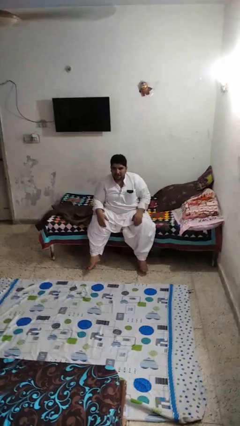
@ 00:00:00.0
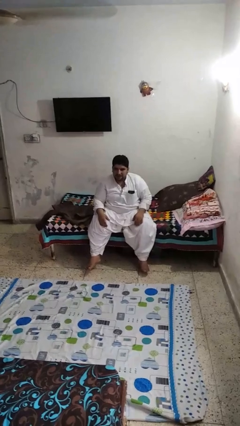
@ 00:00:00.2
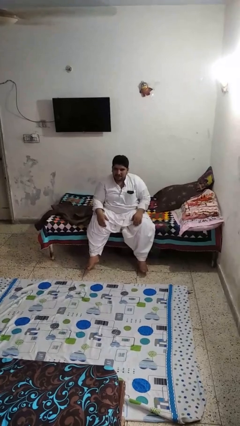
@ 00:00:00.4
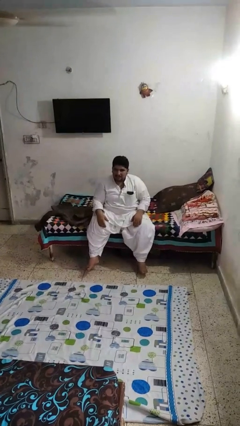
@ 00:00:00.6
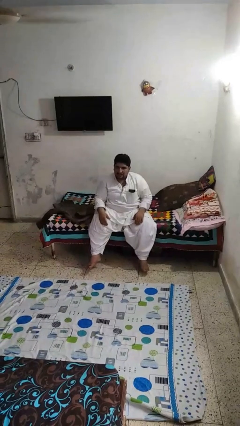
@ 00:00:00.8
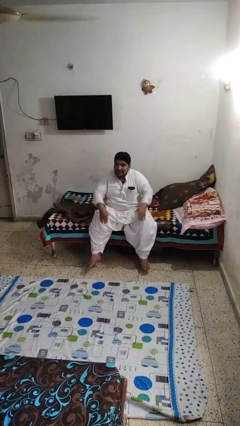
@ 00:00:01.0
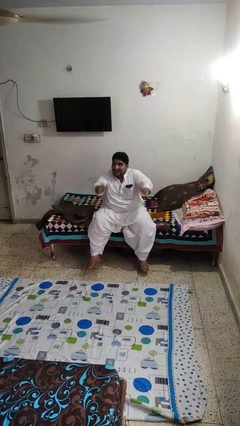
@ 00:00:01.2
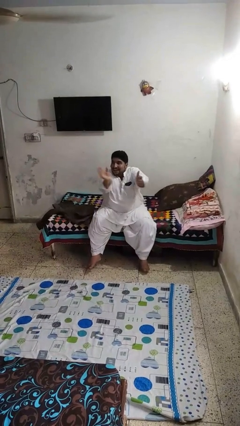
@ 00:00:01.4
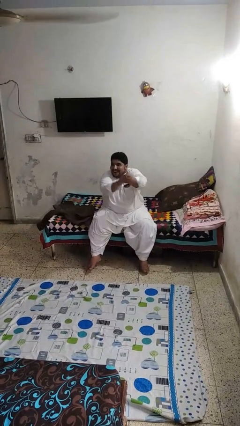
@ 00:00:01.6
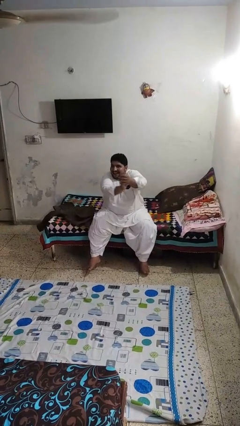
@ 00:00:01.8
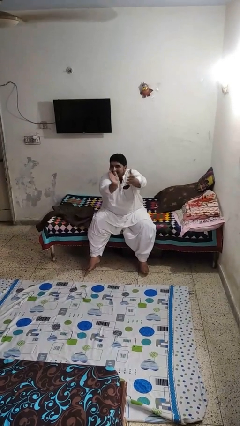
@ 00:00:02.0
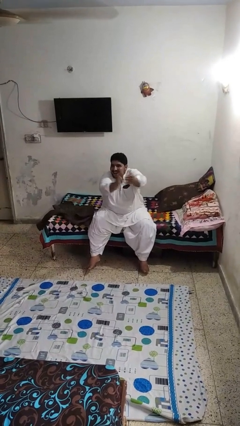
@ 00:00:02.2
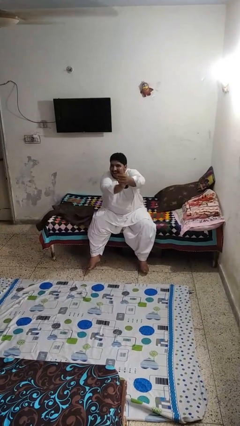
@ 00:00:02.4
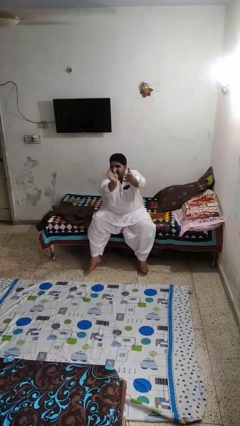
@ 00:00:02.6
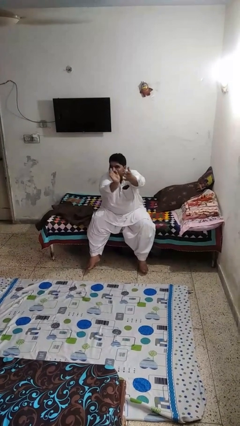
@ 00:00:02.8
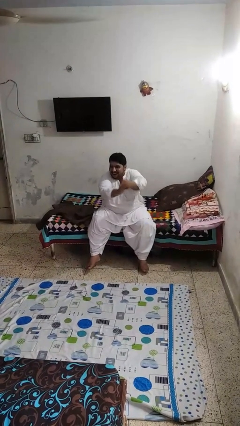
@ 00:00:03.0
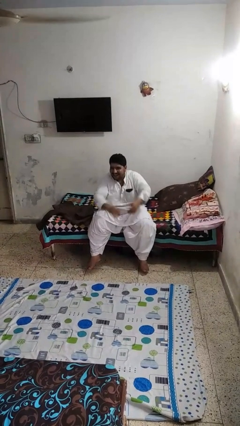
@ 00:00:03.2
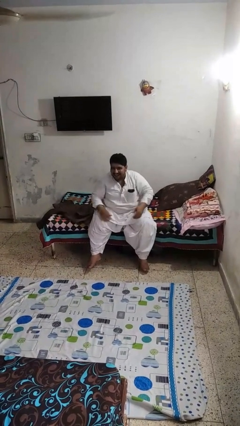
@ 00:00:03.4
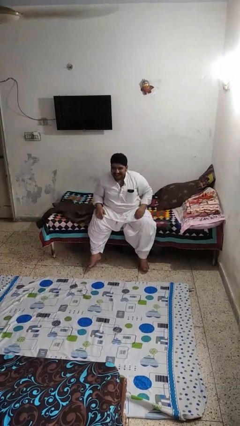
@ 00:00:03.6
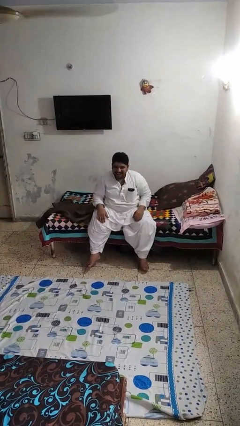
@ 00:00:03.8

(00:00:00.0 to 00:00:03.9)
person claps hands

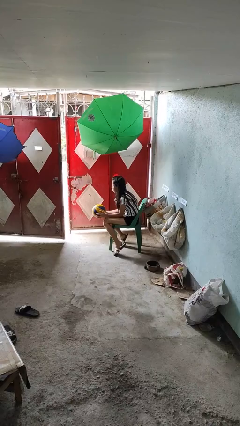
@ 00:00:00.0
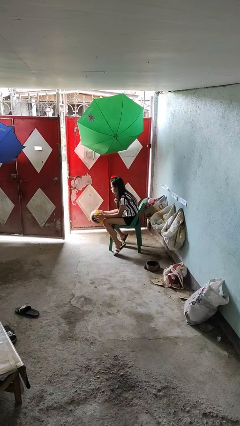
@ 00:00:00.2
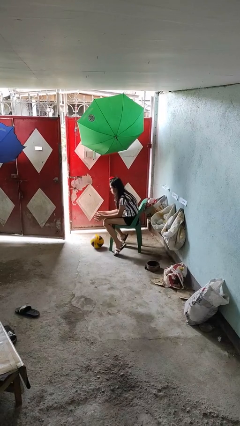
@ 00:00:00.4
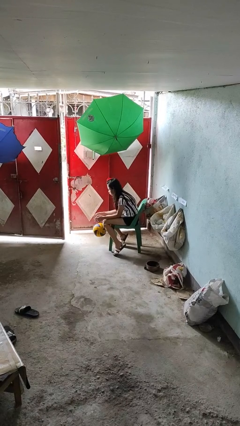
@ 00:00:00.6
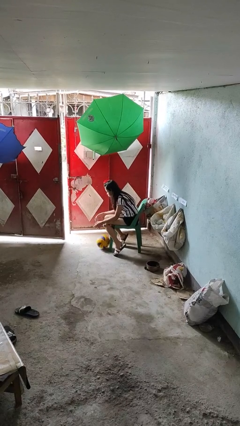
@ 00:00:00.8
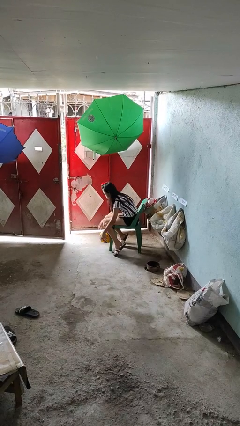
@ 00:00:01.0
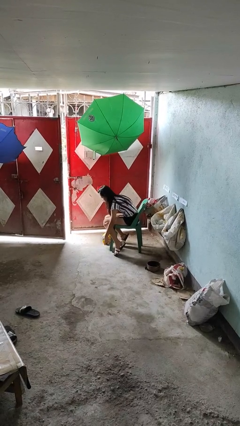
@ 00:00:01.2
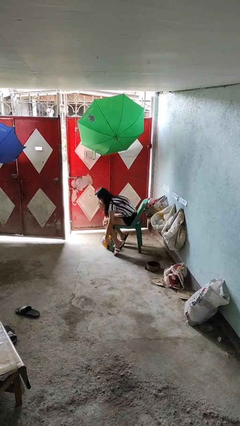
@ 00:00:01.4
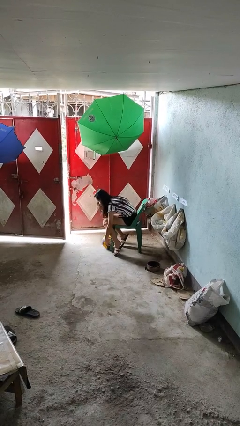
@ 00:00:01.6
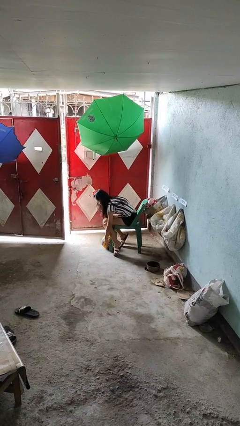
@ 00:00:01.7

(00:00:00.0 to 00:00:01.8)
person drops object

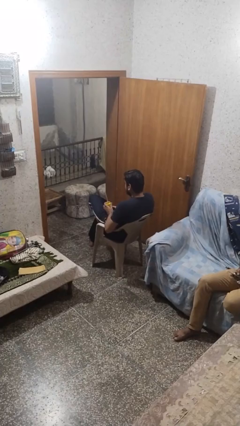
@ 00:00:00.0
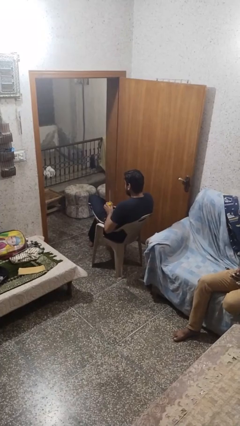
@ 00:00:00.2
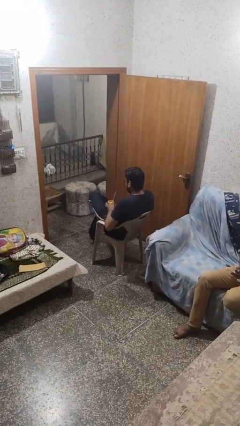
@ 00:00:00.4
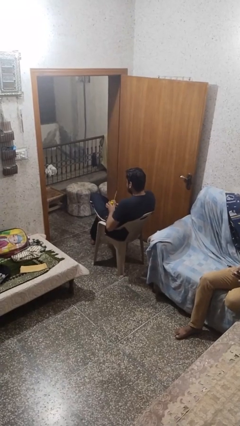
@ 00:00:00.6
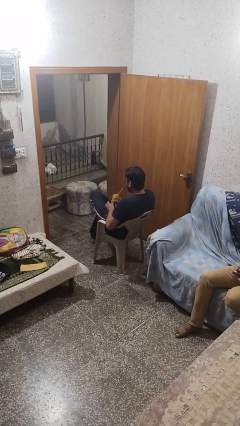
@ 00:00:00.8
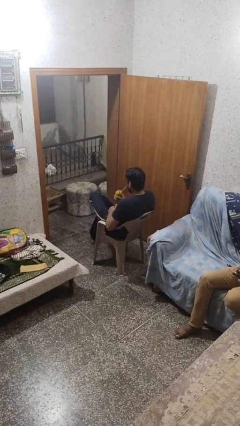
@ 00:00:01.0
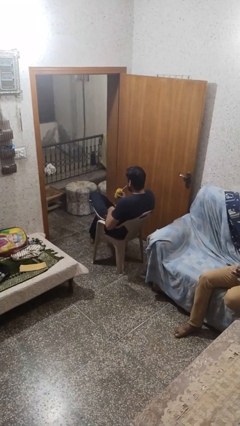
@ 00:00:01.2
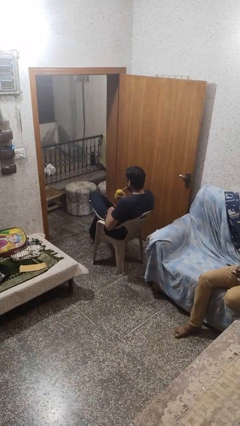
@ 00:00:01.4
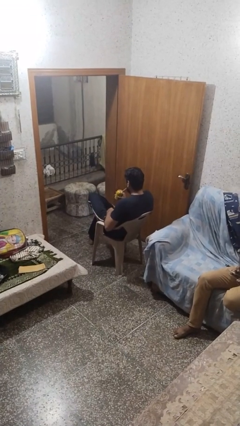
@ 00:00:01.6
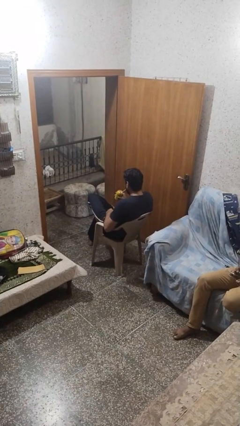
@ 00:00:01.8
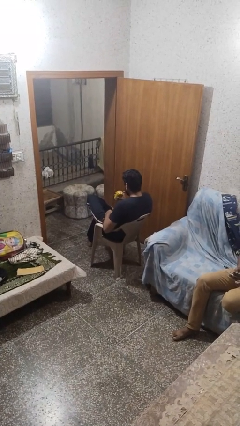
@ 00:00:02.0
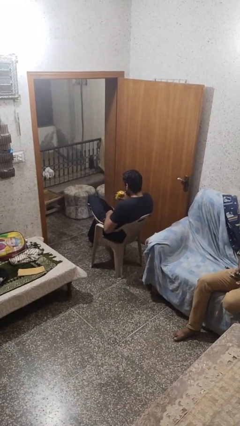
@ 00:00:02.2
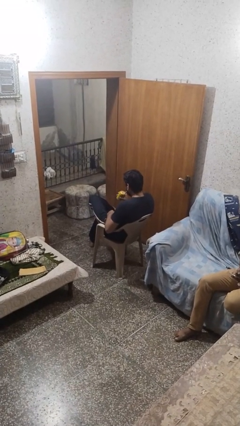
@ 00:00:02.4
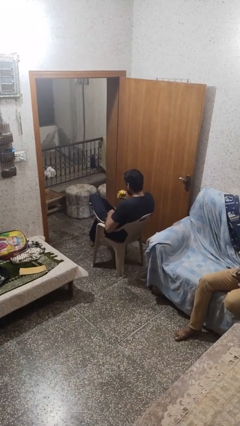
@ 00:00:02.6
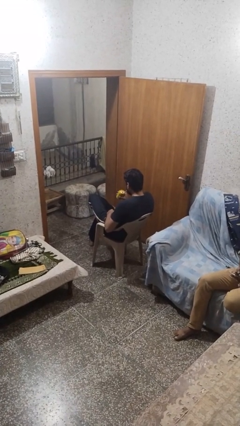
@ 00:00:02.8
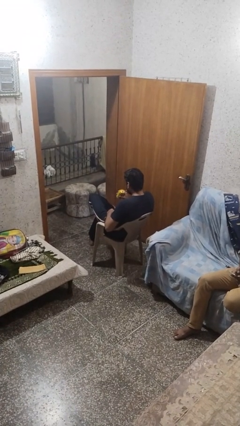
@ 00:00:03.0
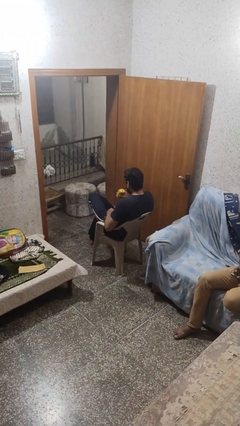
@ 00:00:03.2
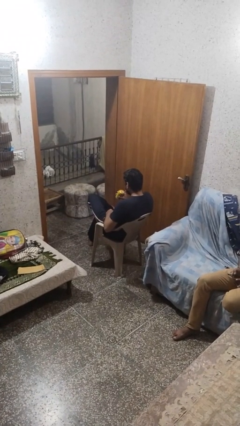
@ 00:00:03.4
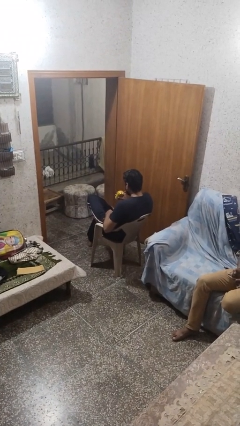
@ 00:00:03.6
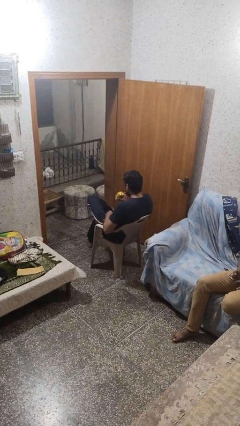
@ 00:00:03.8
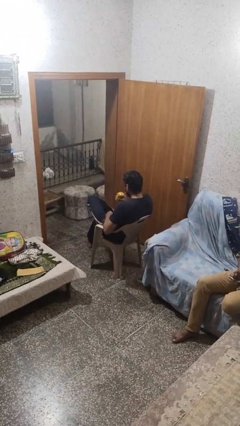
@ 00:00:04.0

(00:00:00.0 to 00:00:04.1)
person drinks from straw

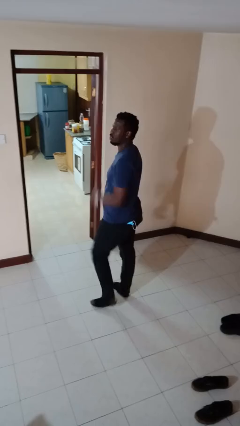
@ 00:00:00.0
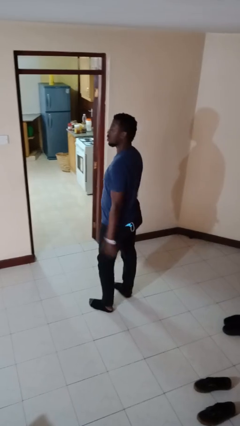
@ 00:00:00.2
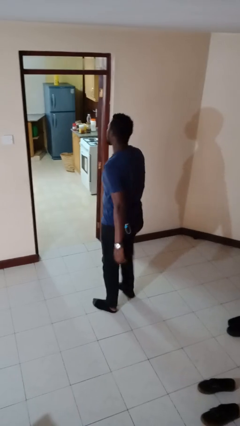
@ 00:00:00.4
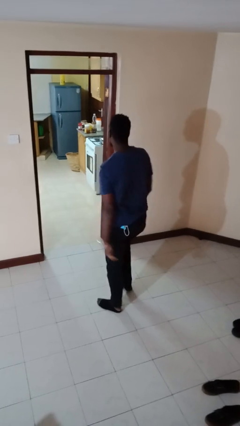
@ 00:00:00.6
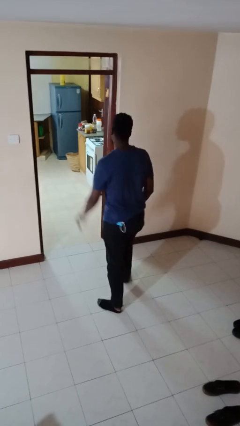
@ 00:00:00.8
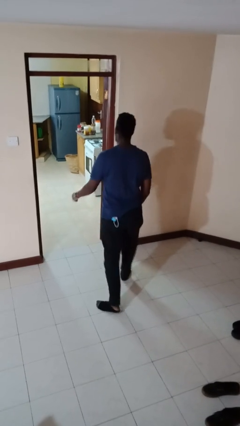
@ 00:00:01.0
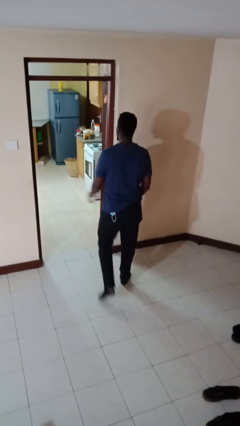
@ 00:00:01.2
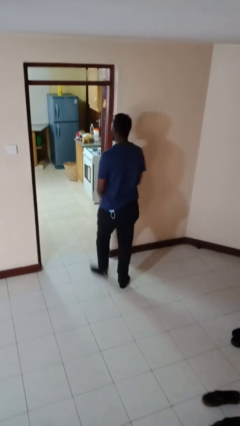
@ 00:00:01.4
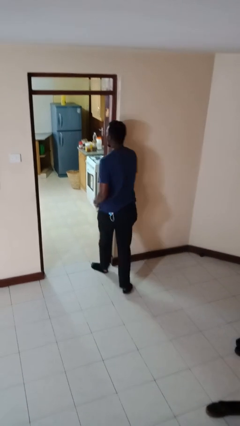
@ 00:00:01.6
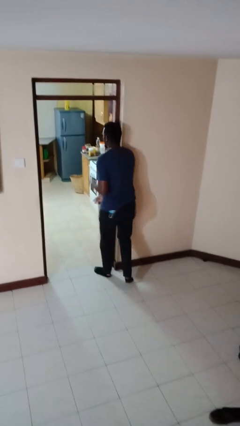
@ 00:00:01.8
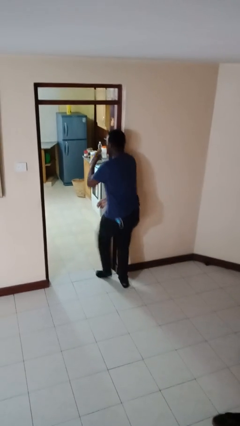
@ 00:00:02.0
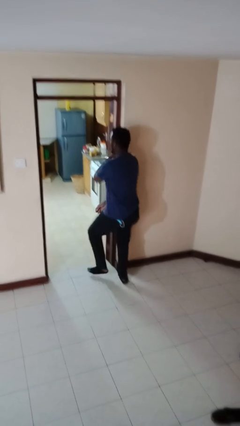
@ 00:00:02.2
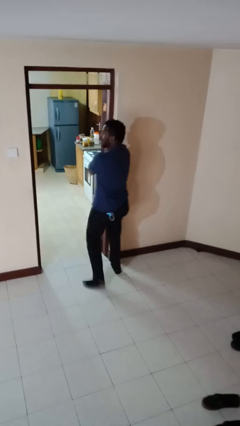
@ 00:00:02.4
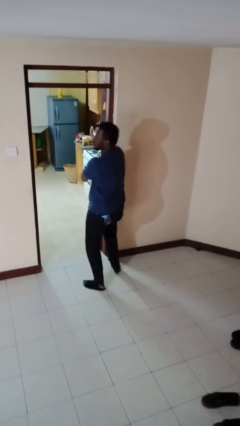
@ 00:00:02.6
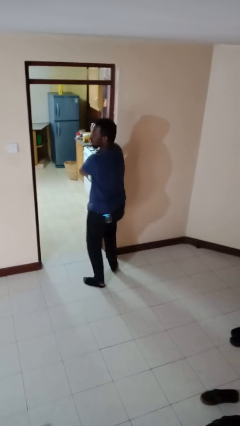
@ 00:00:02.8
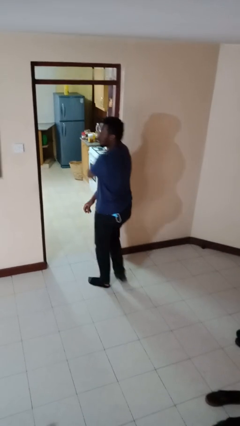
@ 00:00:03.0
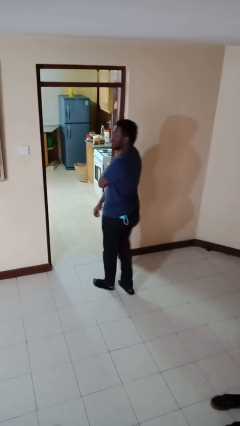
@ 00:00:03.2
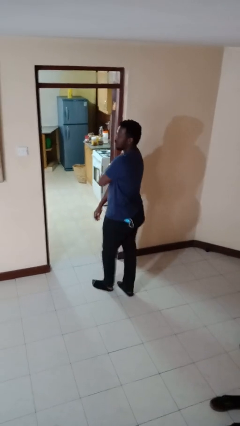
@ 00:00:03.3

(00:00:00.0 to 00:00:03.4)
person bumps into wall

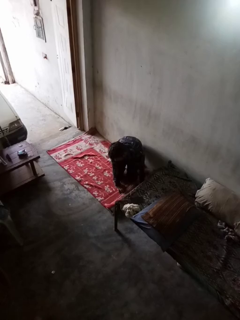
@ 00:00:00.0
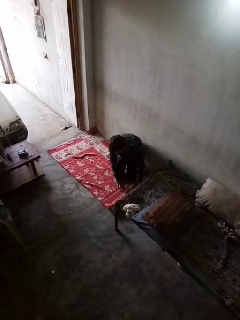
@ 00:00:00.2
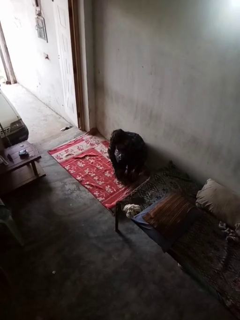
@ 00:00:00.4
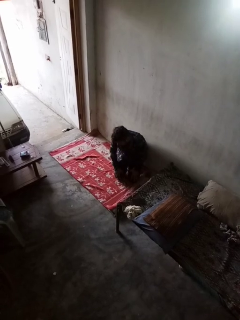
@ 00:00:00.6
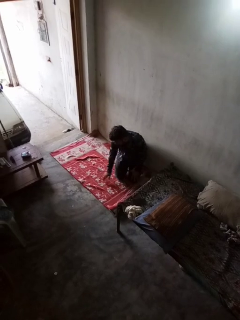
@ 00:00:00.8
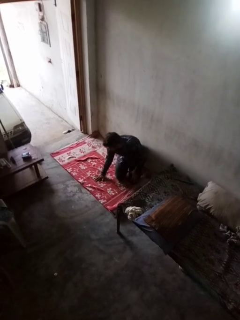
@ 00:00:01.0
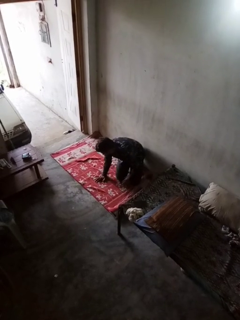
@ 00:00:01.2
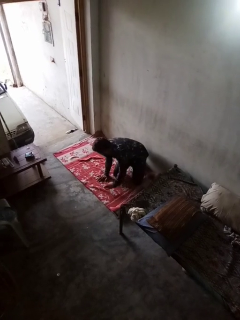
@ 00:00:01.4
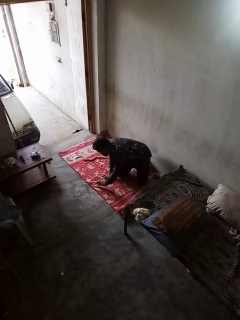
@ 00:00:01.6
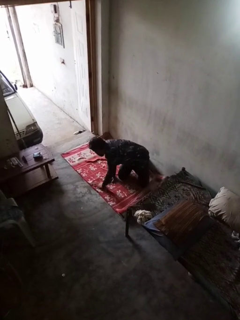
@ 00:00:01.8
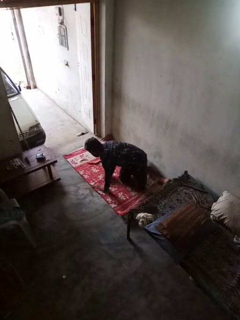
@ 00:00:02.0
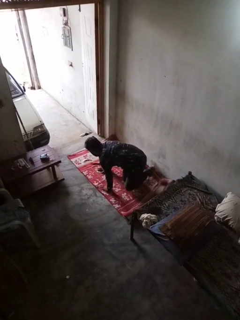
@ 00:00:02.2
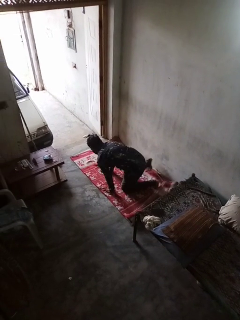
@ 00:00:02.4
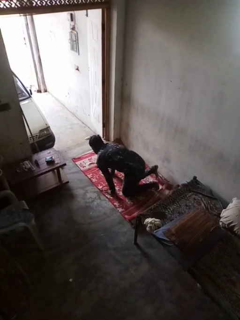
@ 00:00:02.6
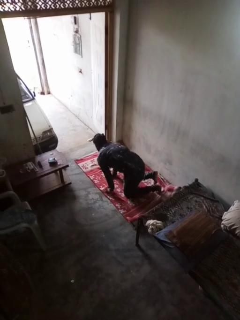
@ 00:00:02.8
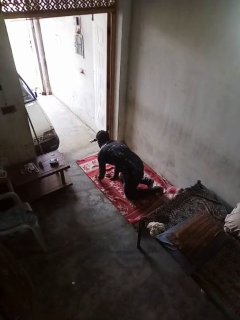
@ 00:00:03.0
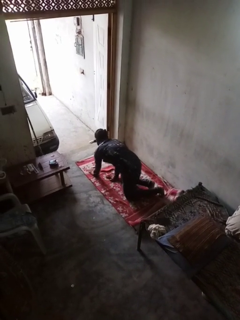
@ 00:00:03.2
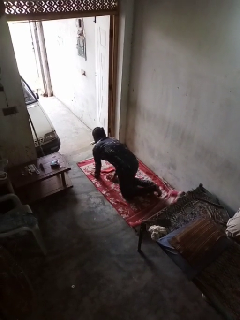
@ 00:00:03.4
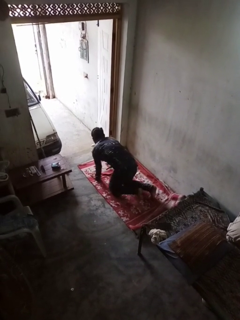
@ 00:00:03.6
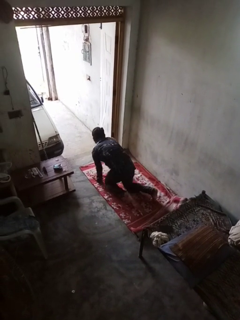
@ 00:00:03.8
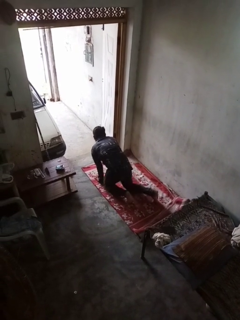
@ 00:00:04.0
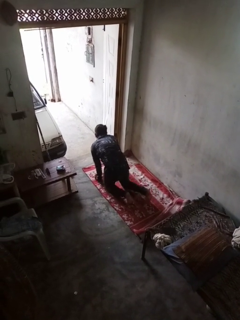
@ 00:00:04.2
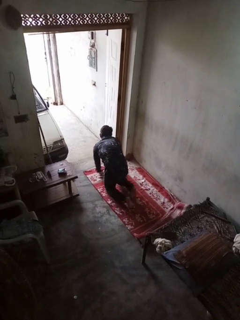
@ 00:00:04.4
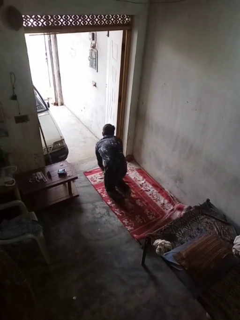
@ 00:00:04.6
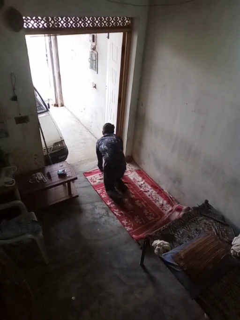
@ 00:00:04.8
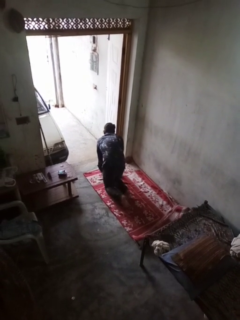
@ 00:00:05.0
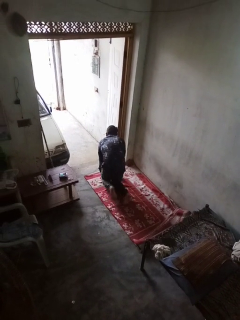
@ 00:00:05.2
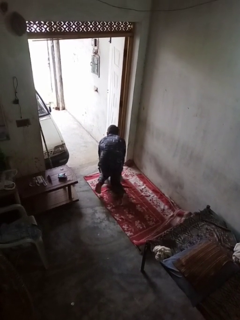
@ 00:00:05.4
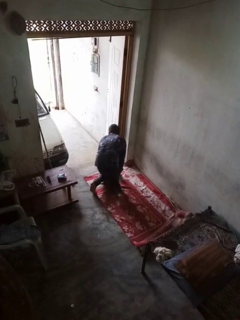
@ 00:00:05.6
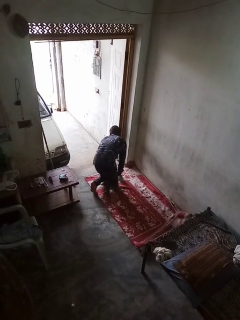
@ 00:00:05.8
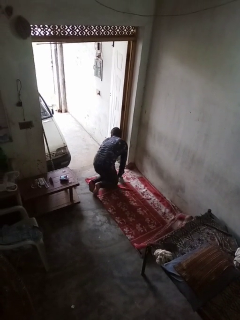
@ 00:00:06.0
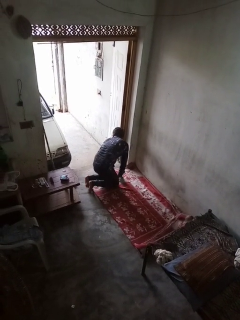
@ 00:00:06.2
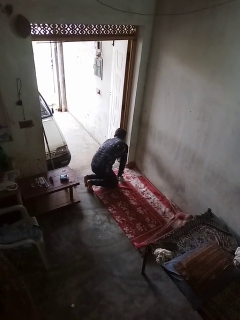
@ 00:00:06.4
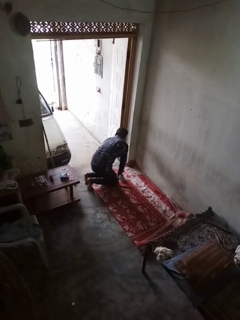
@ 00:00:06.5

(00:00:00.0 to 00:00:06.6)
person crawls
